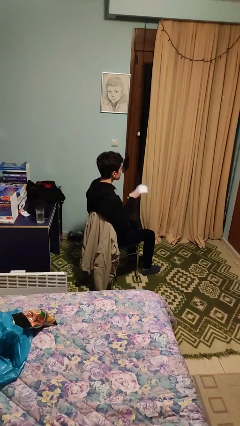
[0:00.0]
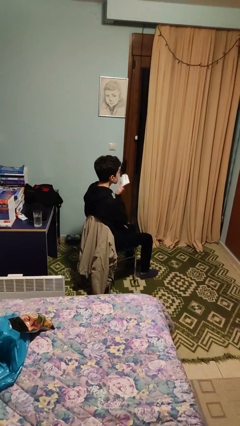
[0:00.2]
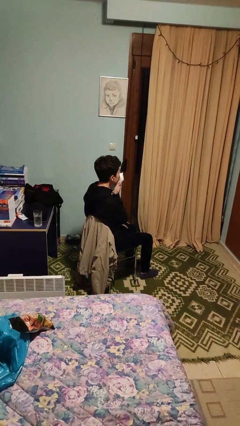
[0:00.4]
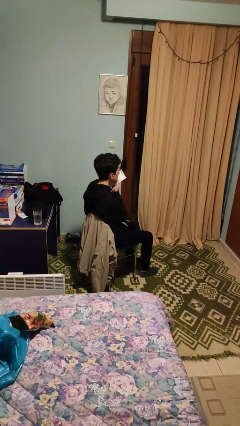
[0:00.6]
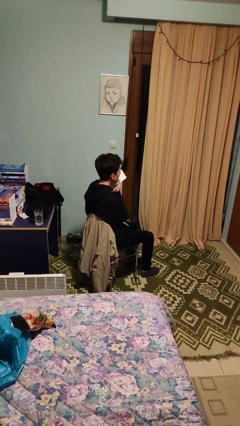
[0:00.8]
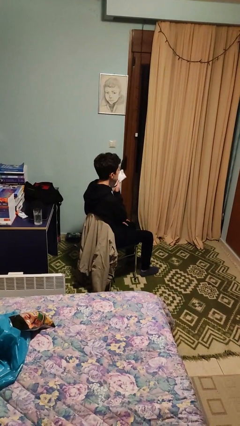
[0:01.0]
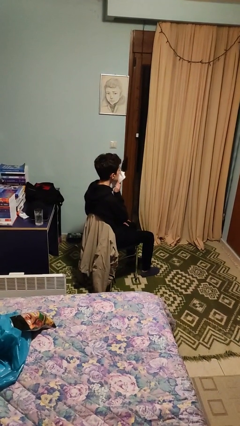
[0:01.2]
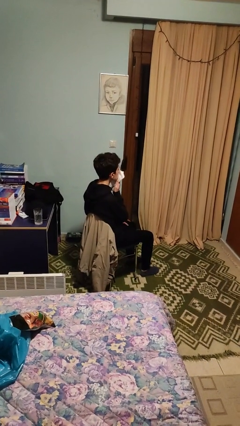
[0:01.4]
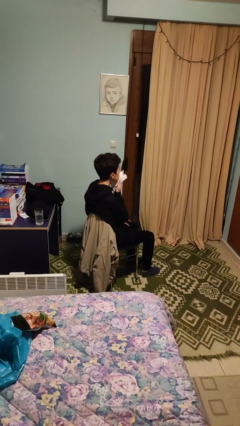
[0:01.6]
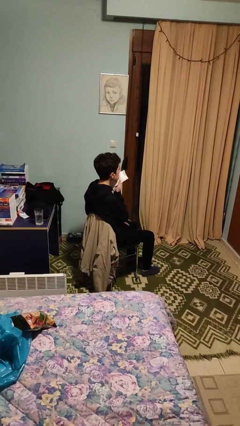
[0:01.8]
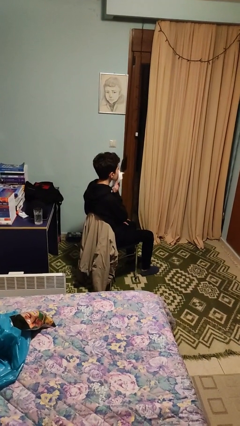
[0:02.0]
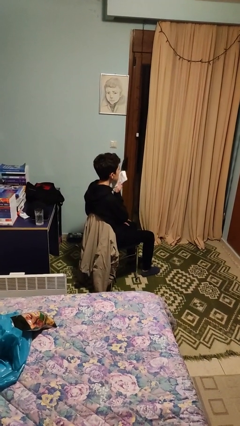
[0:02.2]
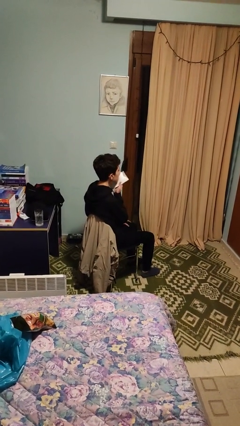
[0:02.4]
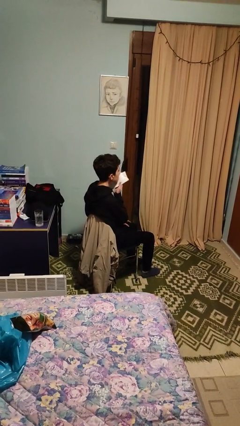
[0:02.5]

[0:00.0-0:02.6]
person wipes mouth with napkin

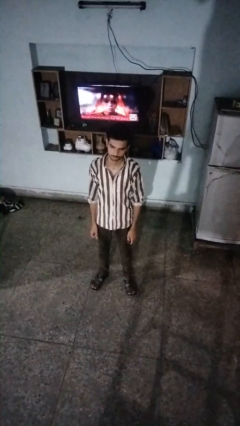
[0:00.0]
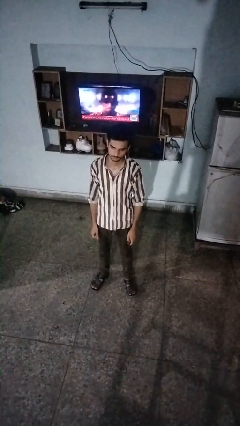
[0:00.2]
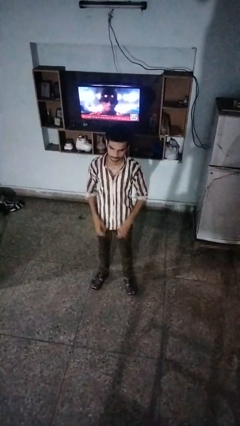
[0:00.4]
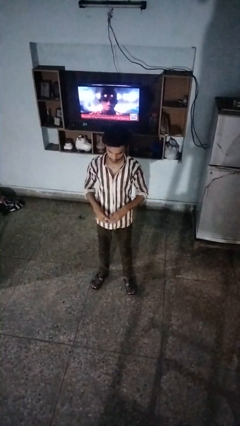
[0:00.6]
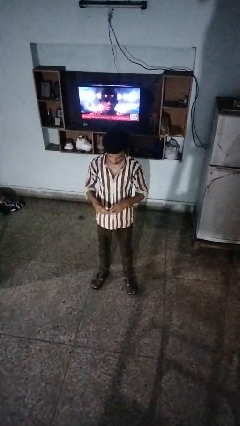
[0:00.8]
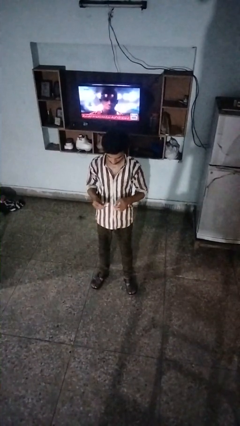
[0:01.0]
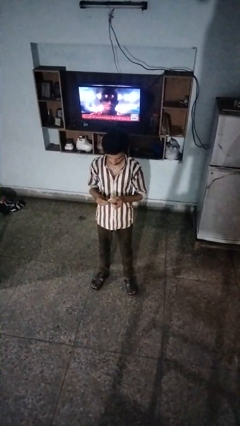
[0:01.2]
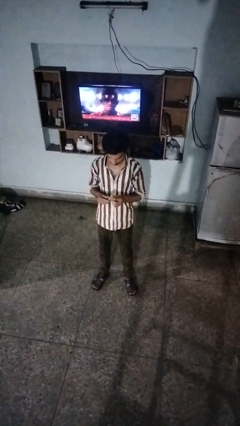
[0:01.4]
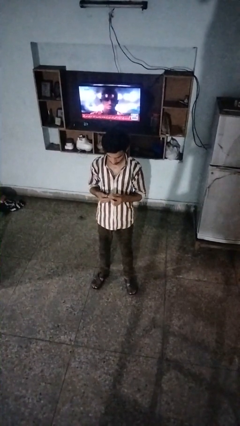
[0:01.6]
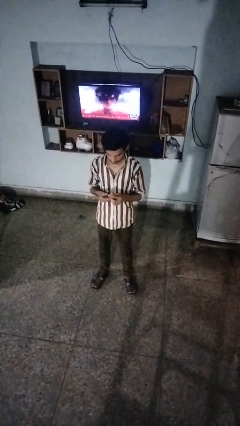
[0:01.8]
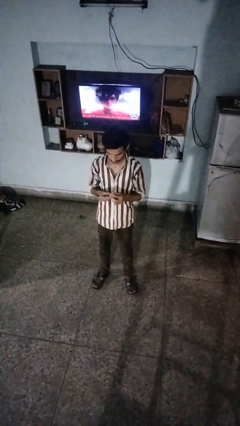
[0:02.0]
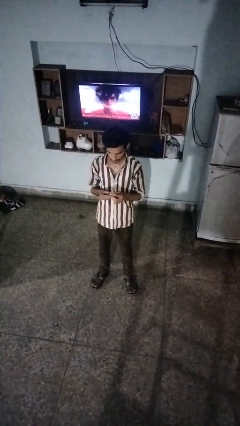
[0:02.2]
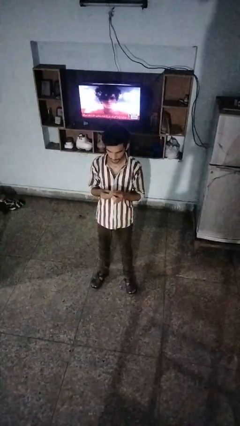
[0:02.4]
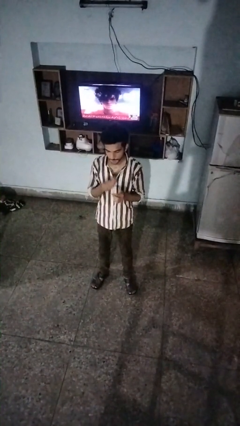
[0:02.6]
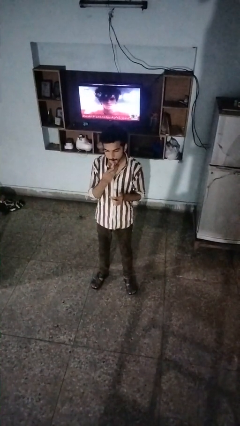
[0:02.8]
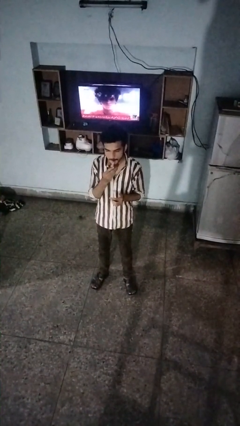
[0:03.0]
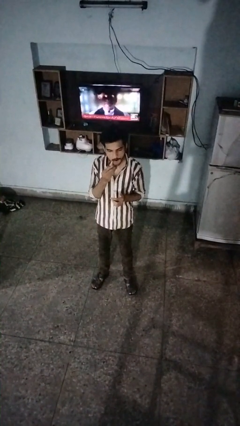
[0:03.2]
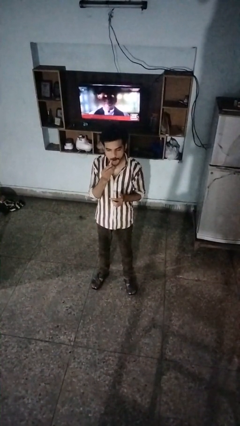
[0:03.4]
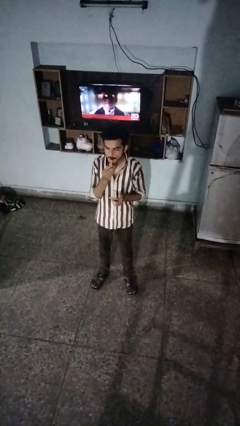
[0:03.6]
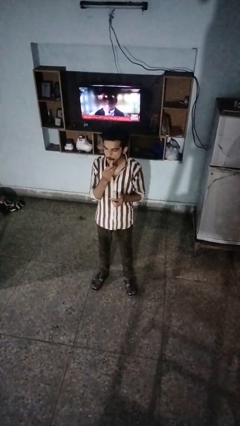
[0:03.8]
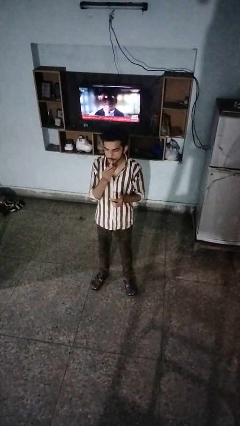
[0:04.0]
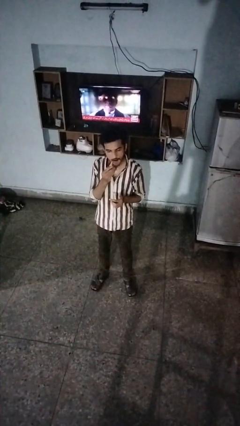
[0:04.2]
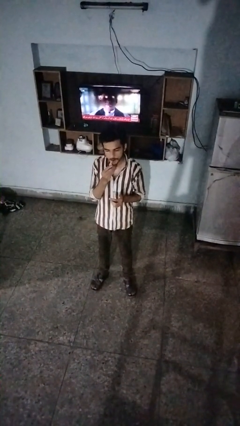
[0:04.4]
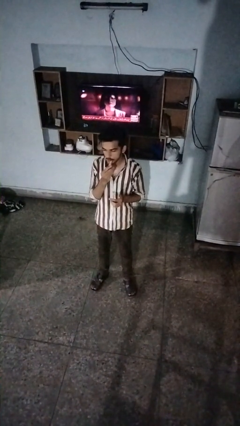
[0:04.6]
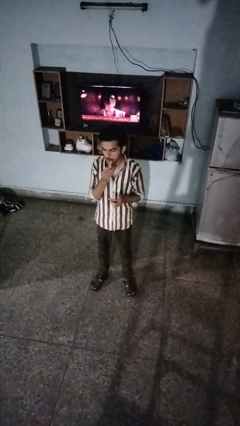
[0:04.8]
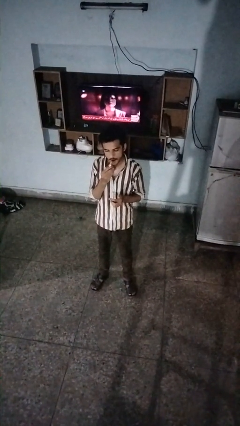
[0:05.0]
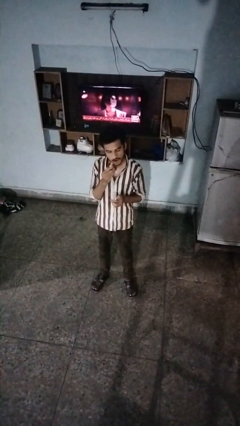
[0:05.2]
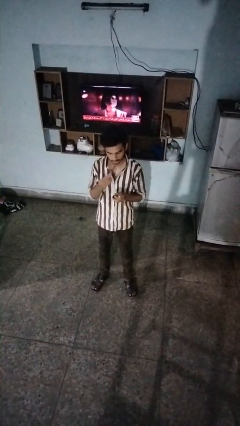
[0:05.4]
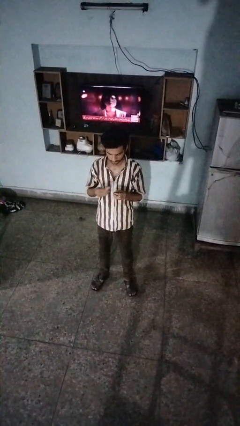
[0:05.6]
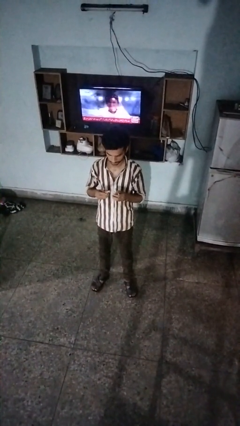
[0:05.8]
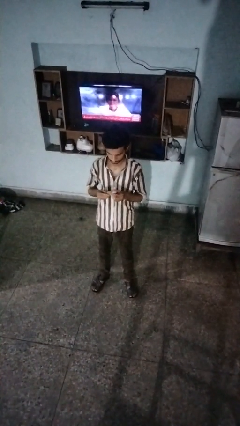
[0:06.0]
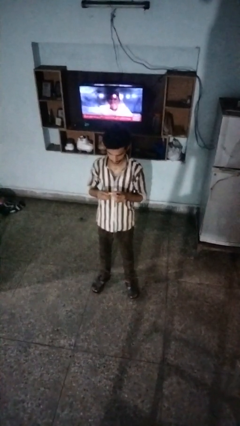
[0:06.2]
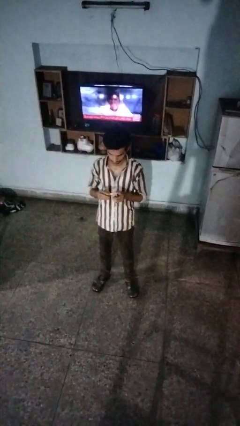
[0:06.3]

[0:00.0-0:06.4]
person applies lip makeup

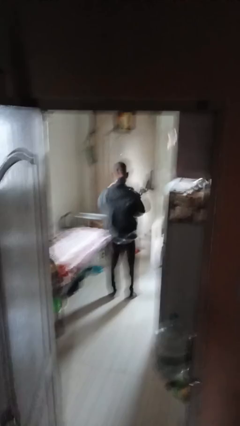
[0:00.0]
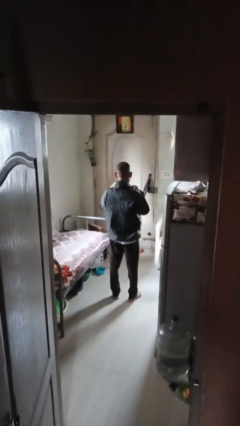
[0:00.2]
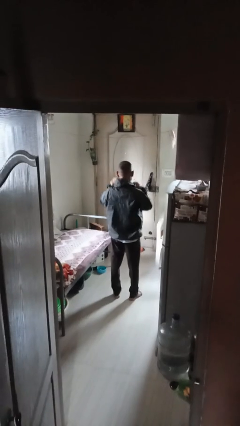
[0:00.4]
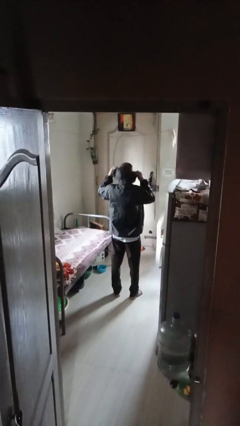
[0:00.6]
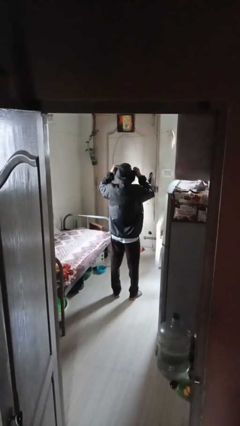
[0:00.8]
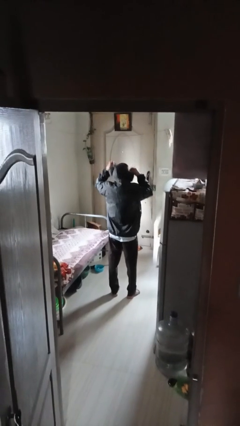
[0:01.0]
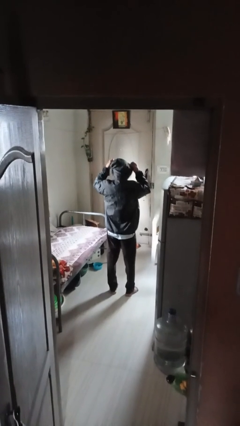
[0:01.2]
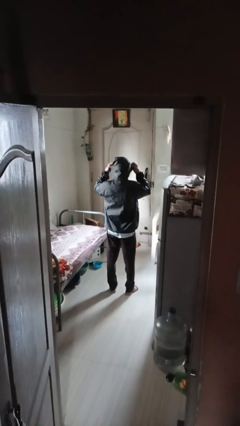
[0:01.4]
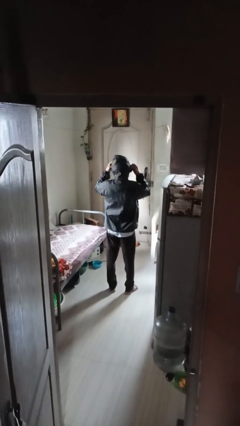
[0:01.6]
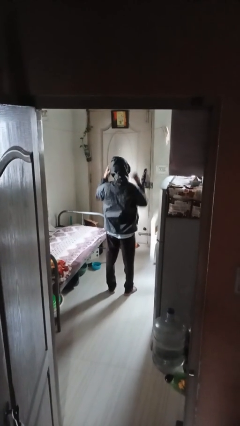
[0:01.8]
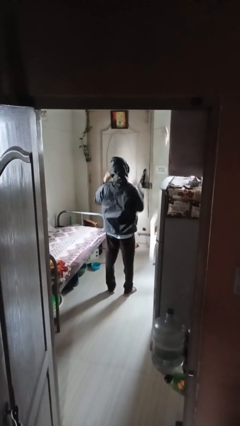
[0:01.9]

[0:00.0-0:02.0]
person puts on hoodie

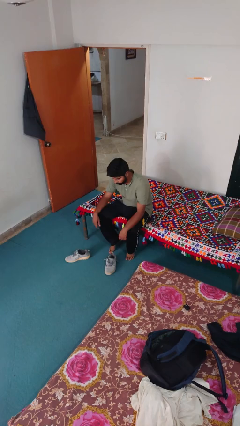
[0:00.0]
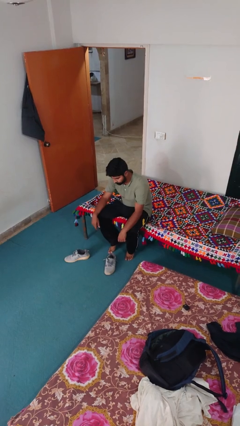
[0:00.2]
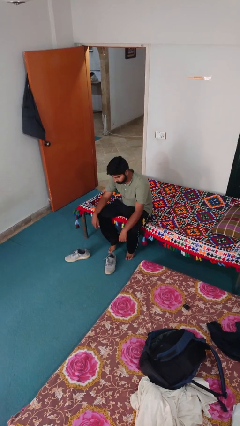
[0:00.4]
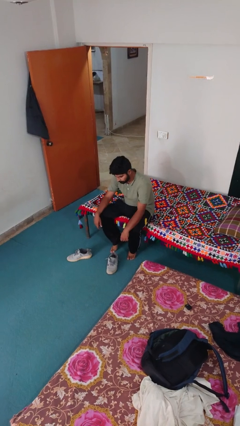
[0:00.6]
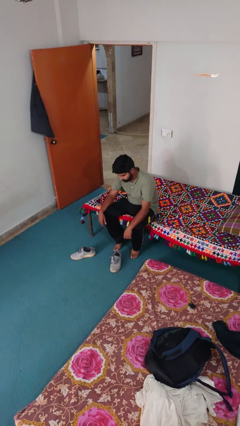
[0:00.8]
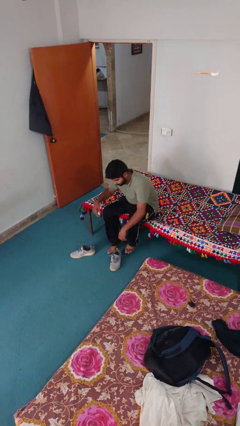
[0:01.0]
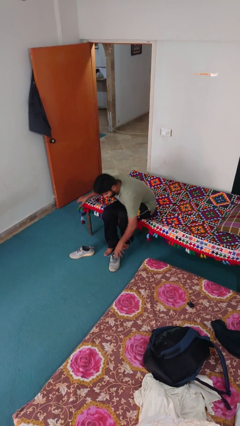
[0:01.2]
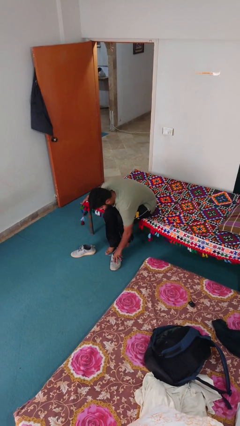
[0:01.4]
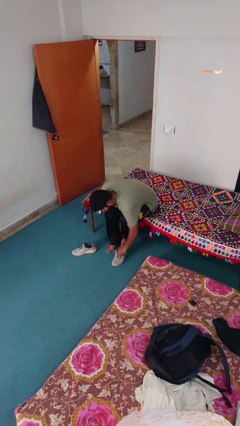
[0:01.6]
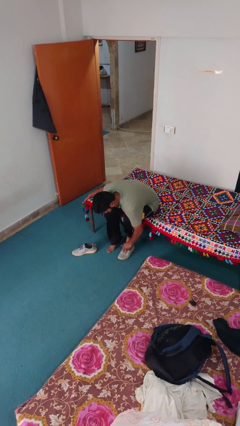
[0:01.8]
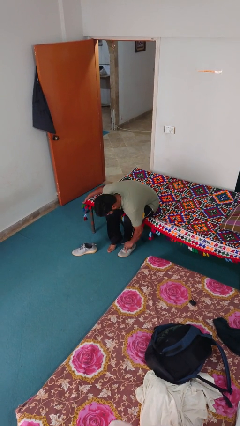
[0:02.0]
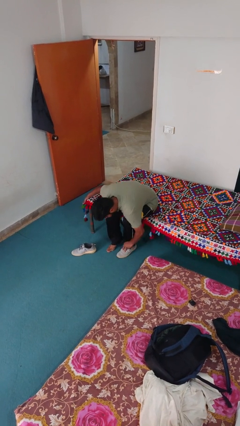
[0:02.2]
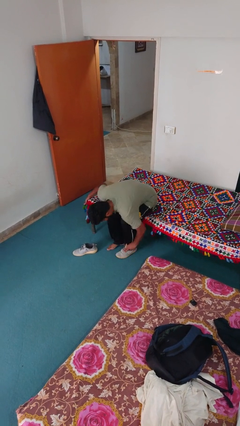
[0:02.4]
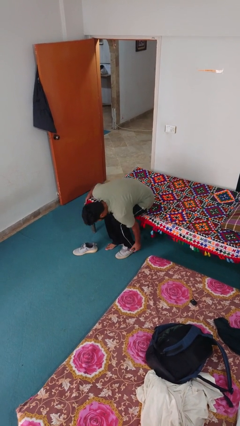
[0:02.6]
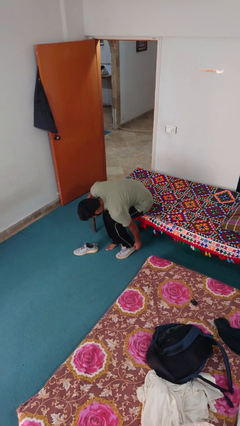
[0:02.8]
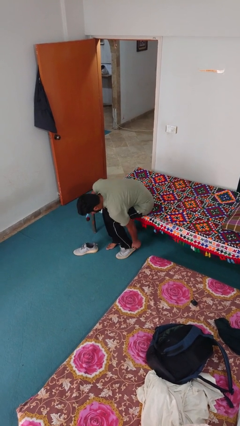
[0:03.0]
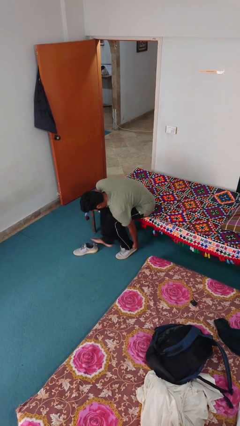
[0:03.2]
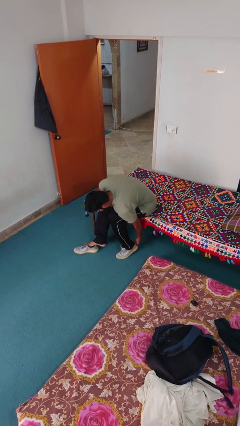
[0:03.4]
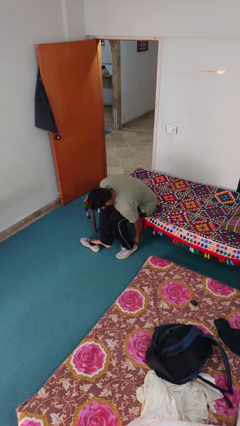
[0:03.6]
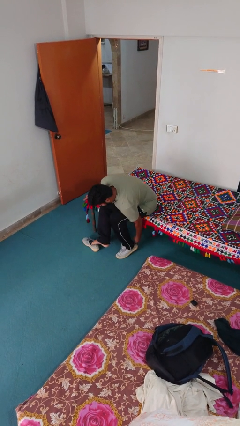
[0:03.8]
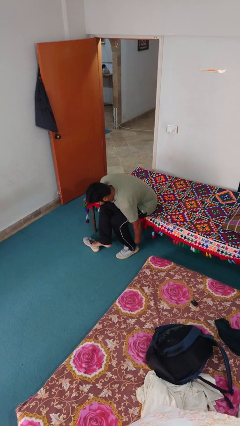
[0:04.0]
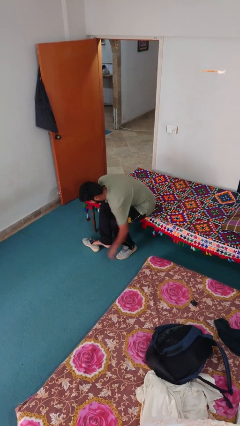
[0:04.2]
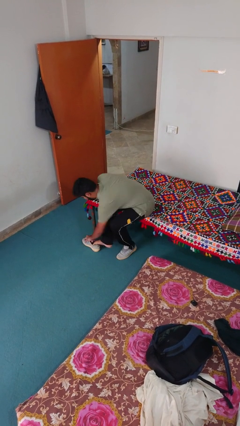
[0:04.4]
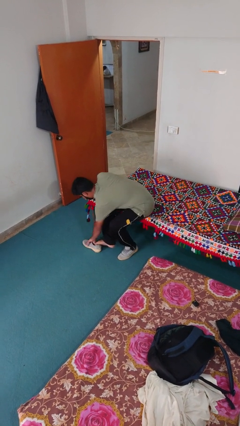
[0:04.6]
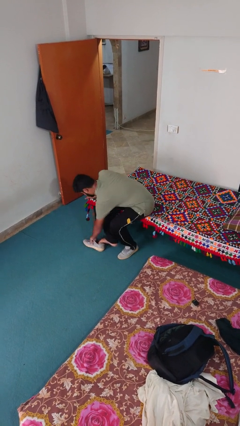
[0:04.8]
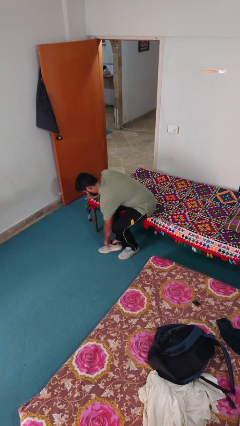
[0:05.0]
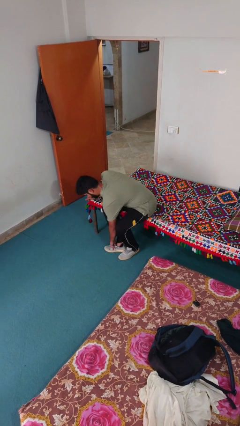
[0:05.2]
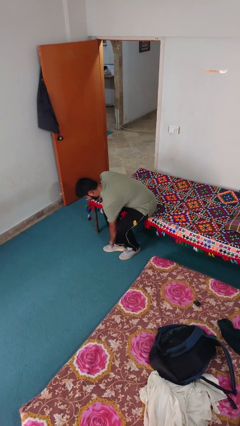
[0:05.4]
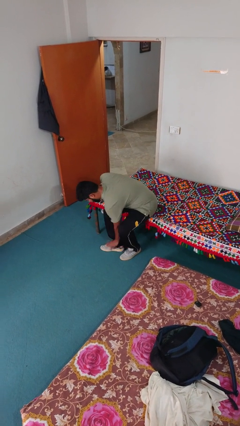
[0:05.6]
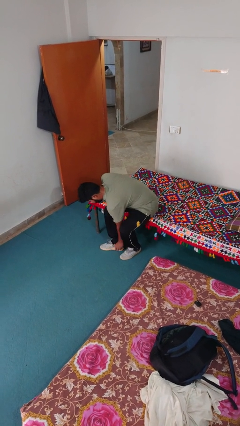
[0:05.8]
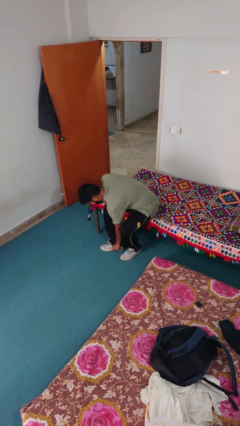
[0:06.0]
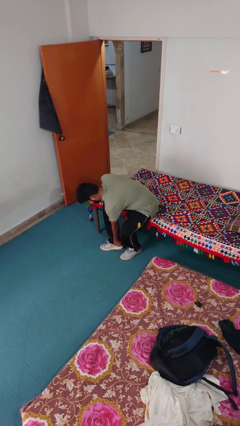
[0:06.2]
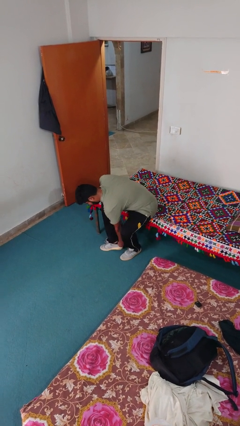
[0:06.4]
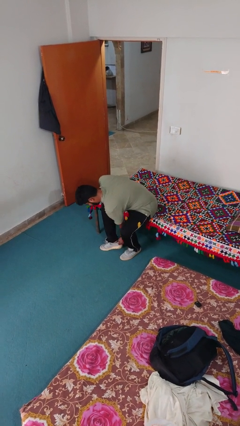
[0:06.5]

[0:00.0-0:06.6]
person puts on shoes
